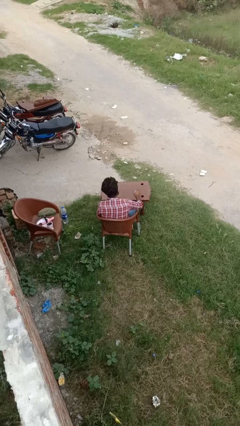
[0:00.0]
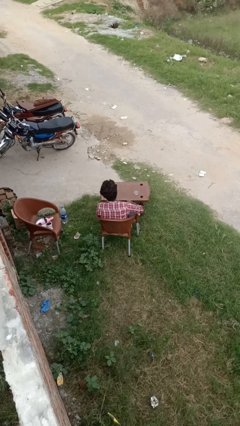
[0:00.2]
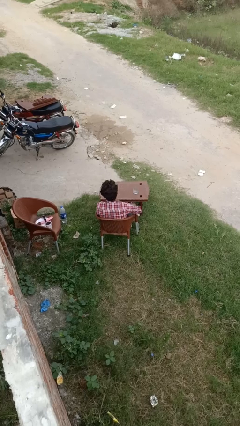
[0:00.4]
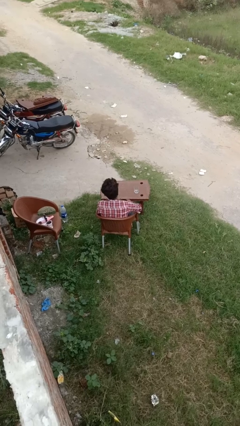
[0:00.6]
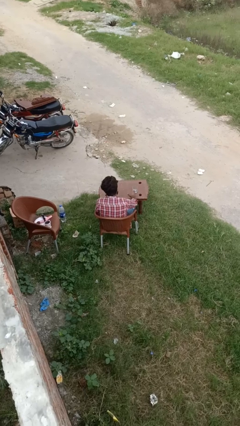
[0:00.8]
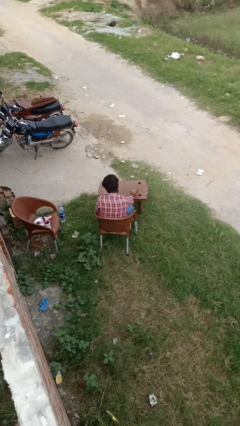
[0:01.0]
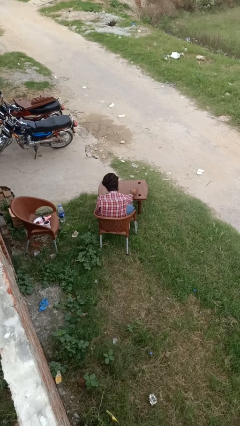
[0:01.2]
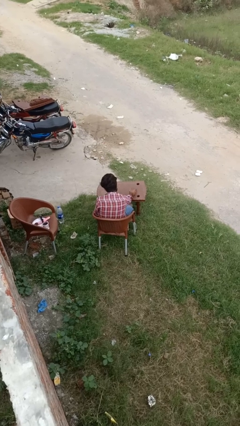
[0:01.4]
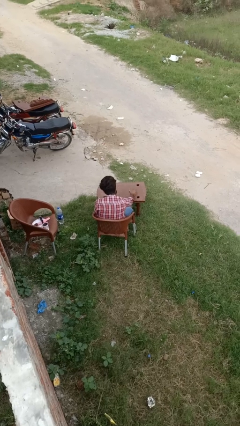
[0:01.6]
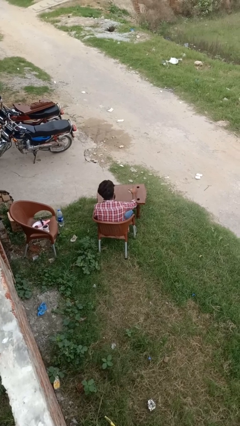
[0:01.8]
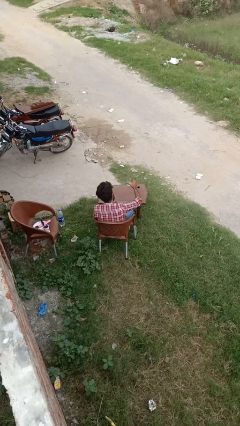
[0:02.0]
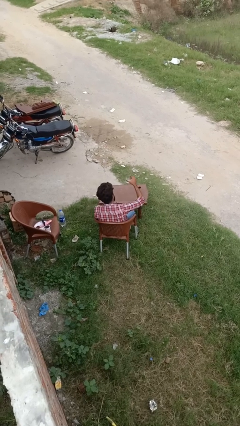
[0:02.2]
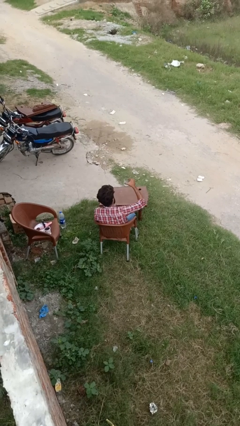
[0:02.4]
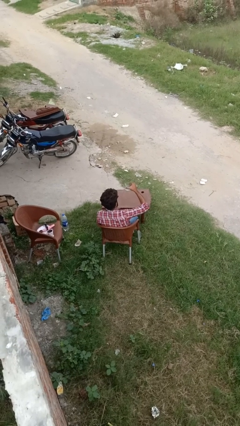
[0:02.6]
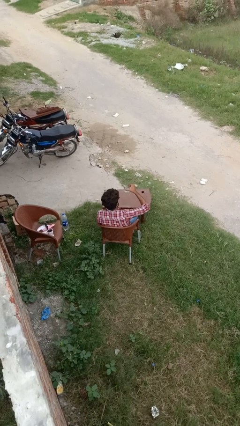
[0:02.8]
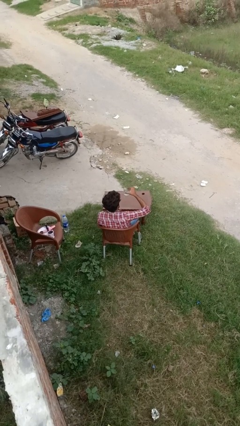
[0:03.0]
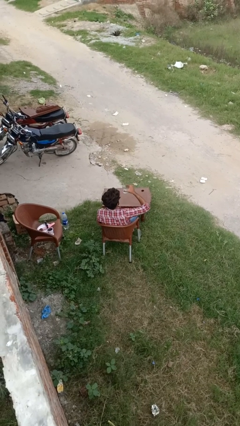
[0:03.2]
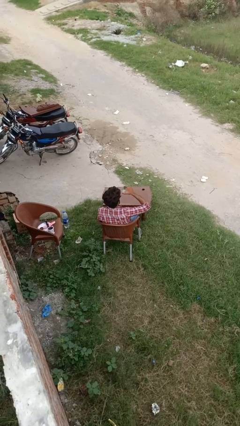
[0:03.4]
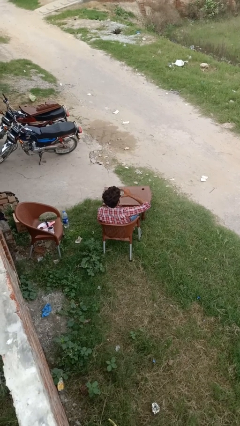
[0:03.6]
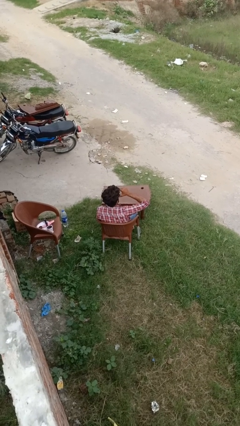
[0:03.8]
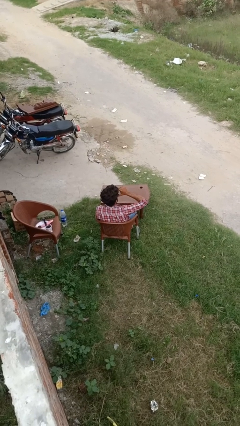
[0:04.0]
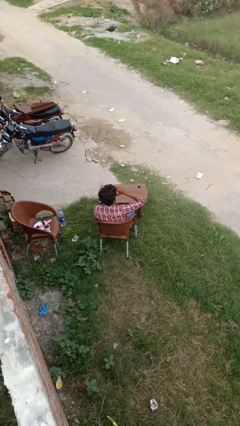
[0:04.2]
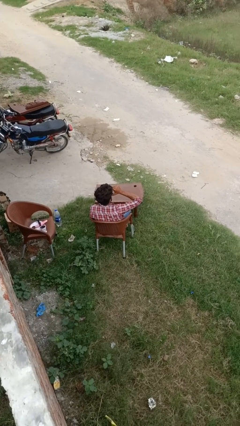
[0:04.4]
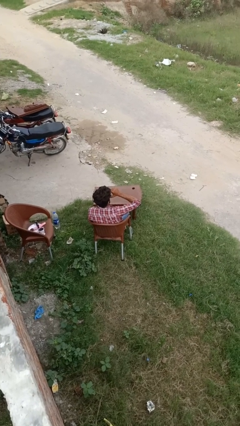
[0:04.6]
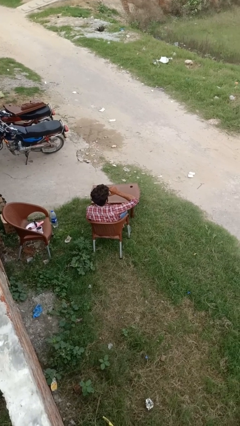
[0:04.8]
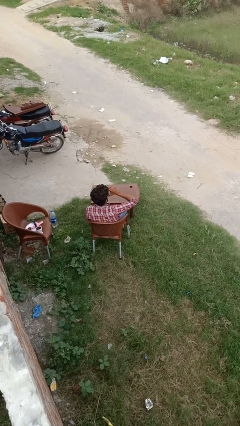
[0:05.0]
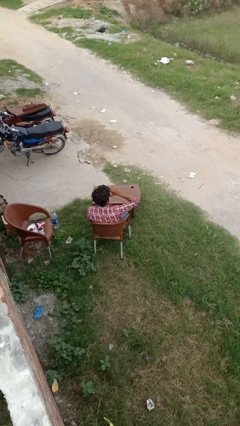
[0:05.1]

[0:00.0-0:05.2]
person picks up object from table

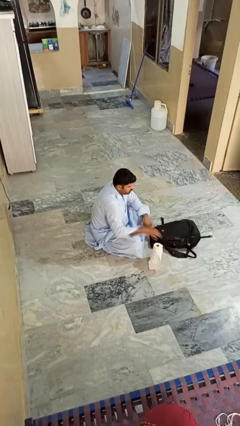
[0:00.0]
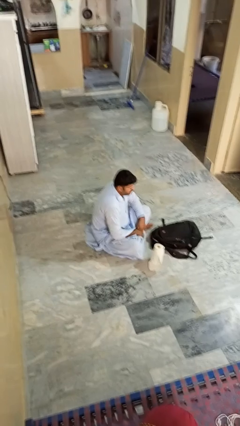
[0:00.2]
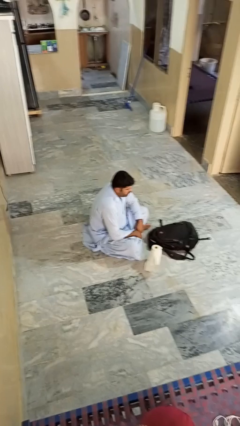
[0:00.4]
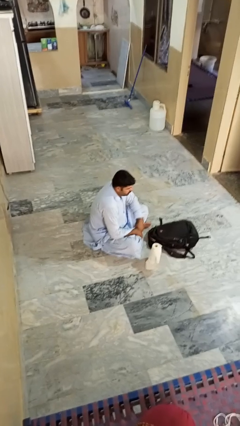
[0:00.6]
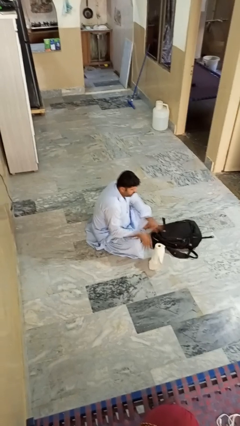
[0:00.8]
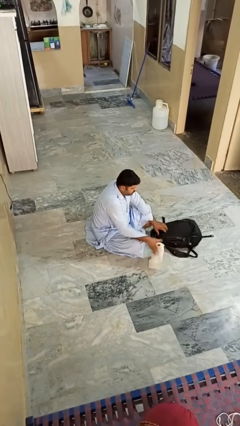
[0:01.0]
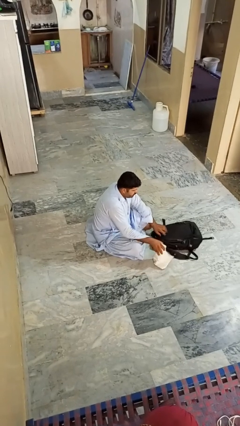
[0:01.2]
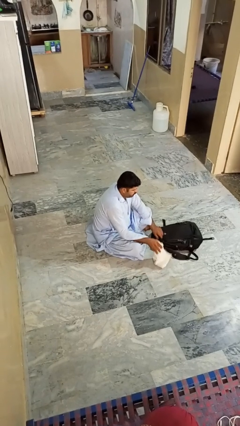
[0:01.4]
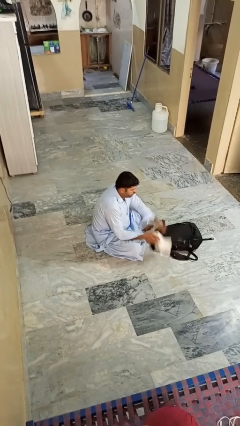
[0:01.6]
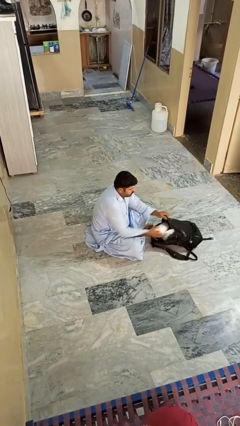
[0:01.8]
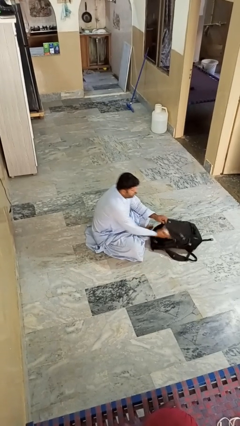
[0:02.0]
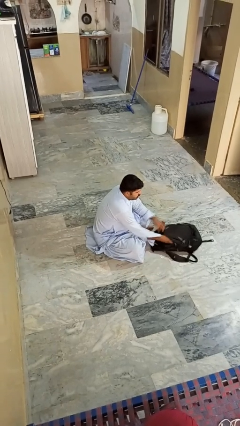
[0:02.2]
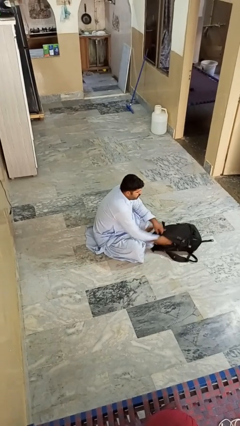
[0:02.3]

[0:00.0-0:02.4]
person puts object into bag

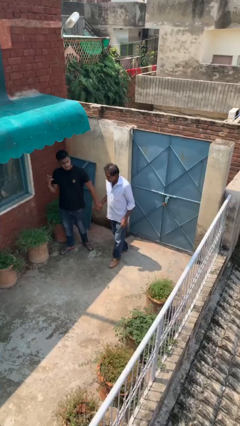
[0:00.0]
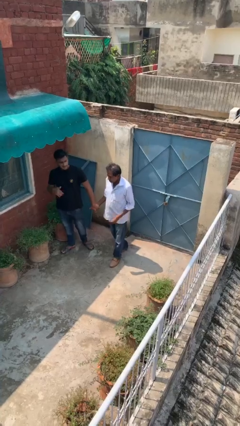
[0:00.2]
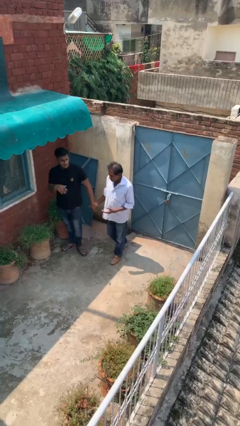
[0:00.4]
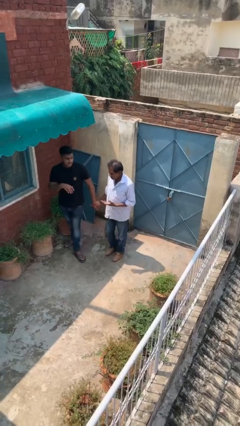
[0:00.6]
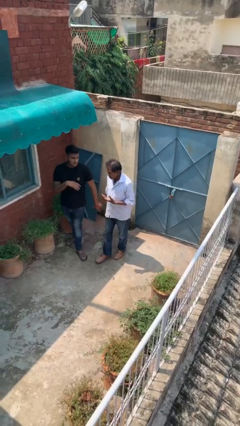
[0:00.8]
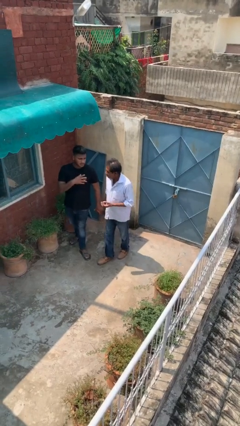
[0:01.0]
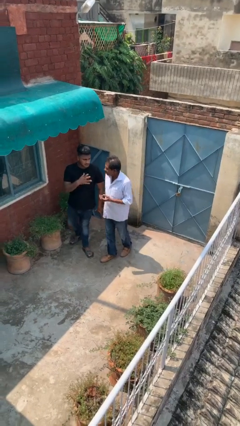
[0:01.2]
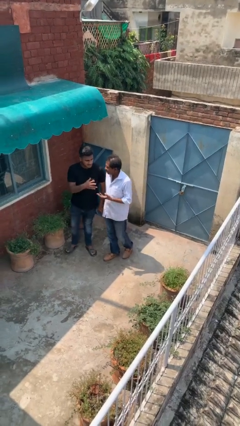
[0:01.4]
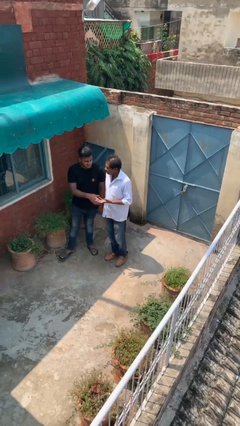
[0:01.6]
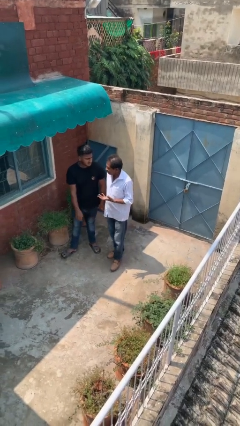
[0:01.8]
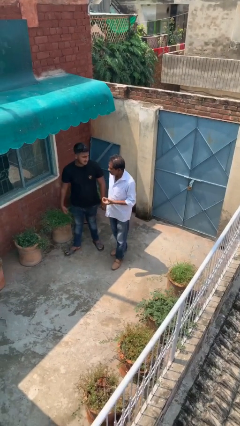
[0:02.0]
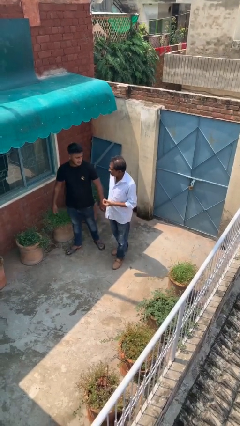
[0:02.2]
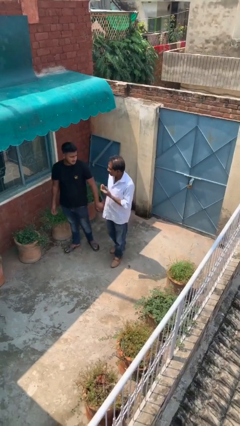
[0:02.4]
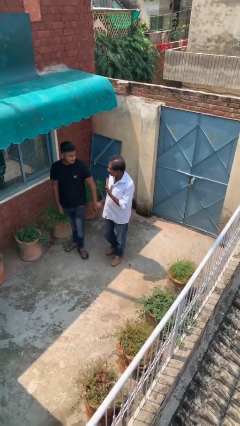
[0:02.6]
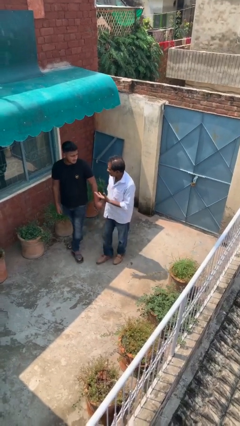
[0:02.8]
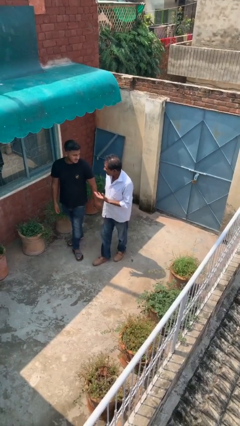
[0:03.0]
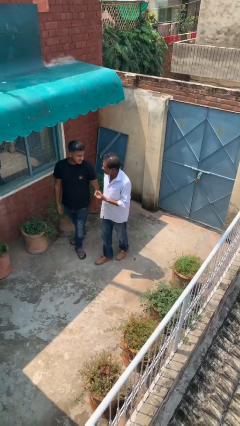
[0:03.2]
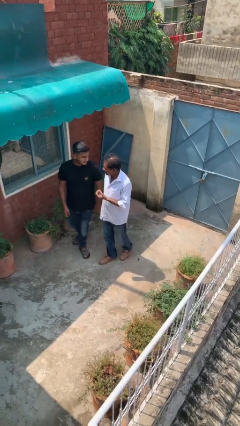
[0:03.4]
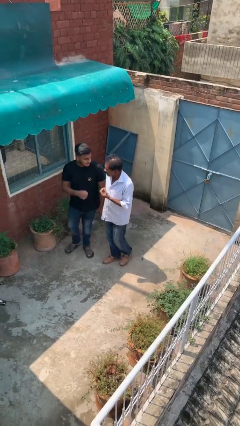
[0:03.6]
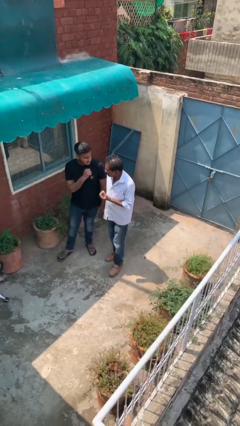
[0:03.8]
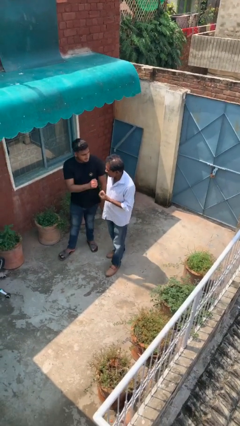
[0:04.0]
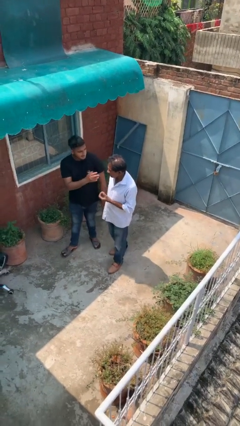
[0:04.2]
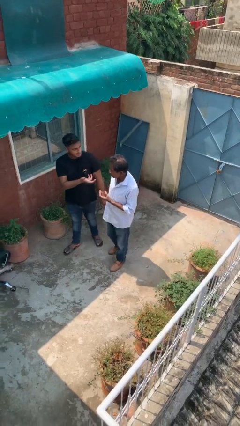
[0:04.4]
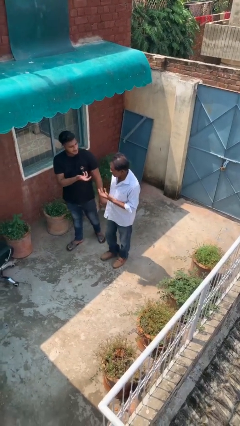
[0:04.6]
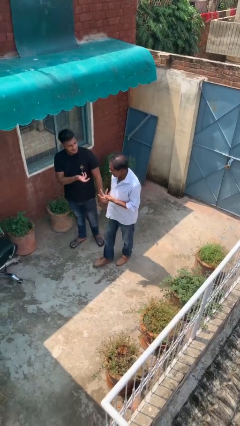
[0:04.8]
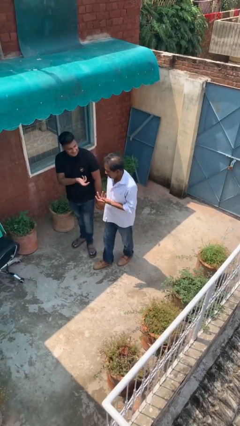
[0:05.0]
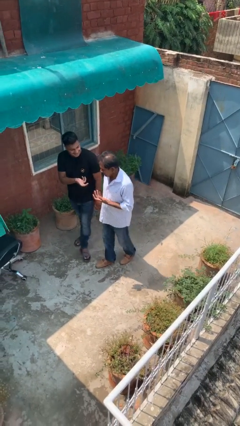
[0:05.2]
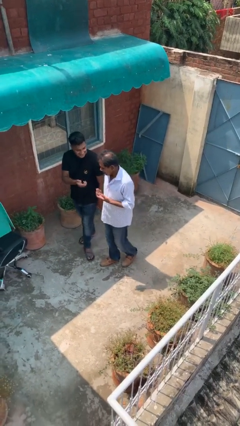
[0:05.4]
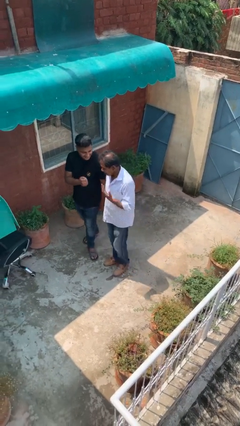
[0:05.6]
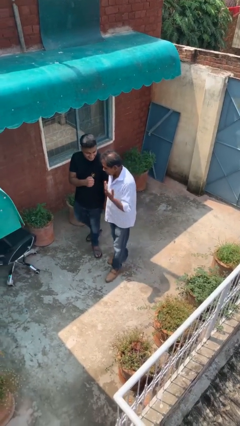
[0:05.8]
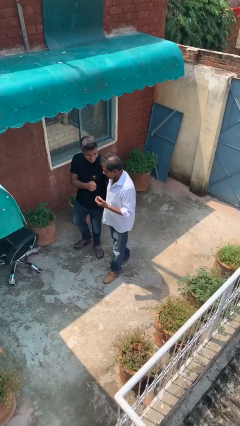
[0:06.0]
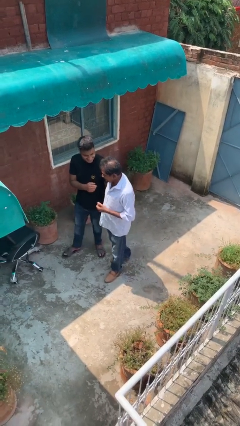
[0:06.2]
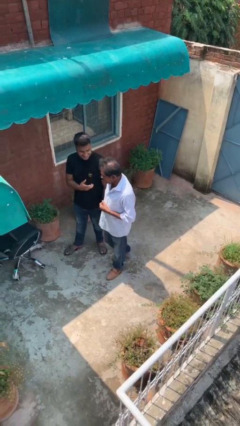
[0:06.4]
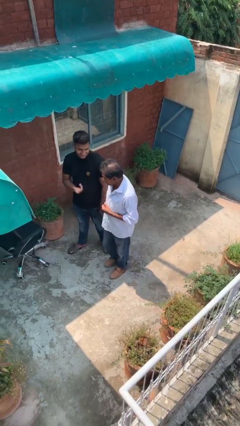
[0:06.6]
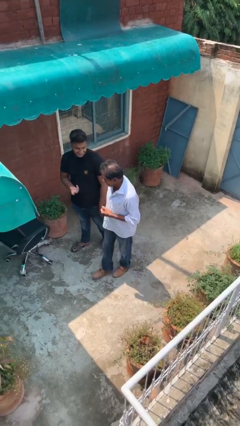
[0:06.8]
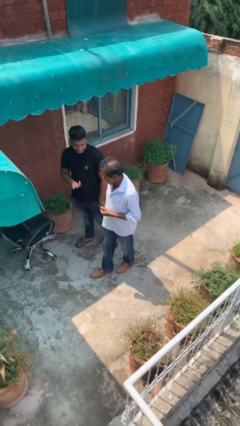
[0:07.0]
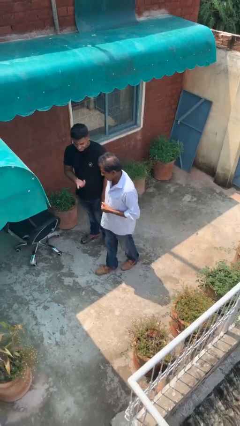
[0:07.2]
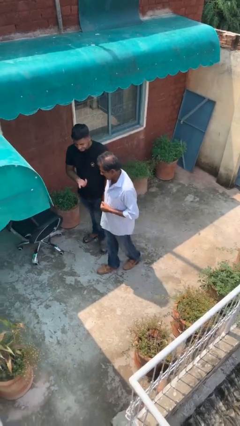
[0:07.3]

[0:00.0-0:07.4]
person holds hand

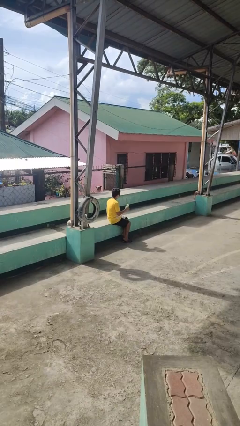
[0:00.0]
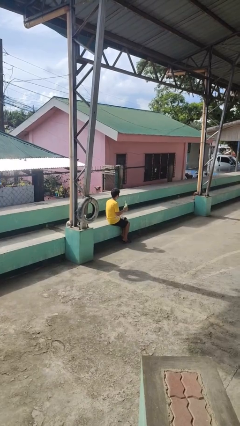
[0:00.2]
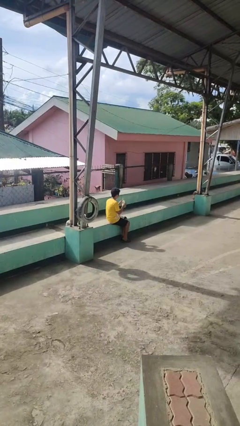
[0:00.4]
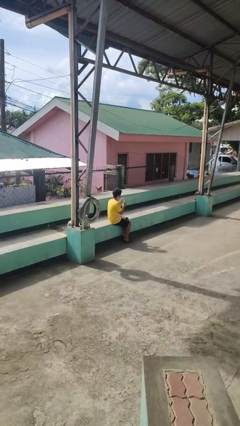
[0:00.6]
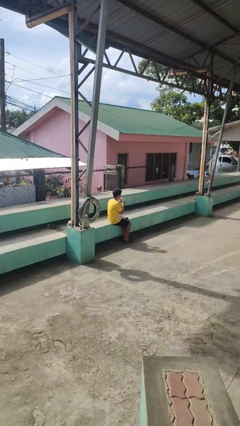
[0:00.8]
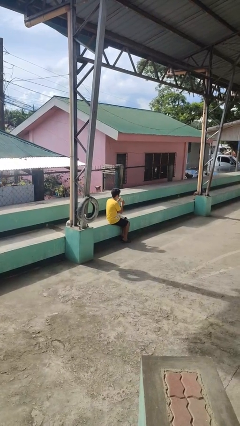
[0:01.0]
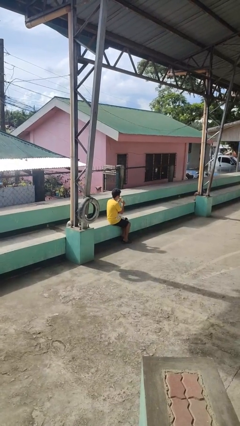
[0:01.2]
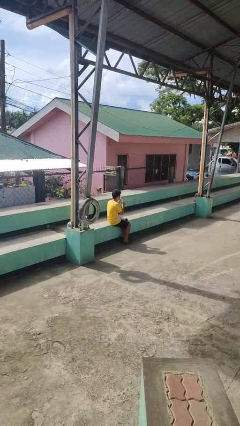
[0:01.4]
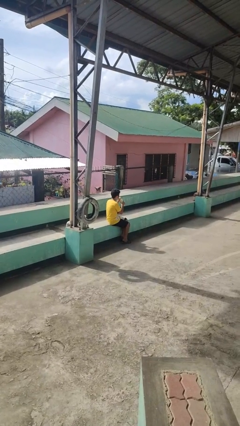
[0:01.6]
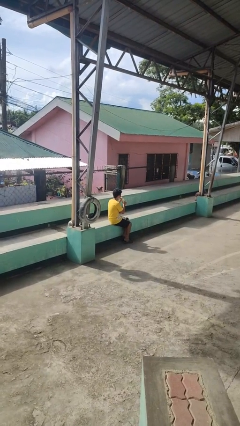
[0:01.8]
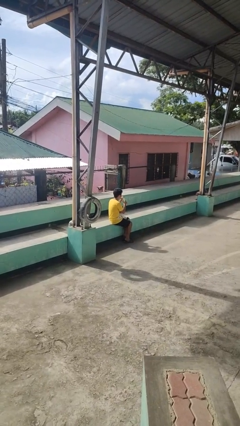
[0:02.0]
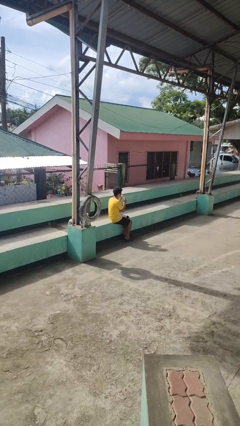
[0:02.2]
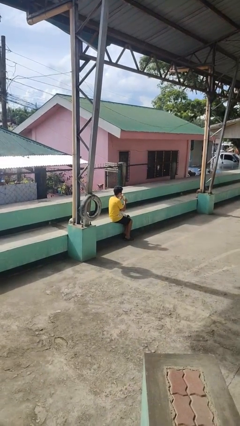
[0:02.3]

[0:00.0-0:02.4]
person drinks from straw
